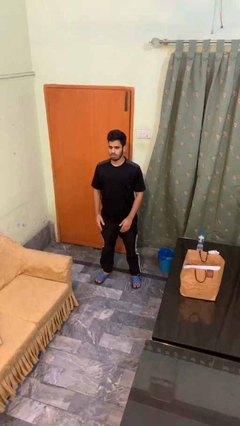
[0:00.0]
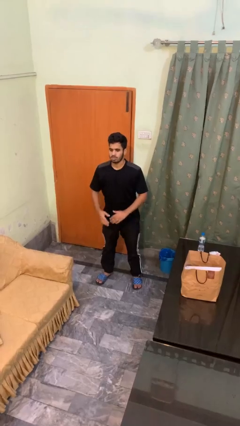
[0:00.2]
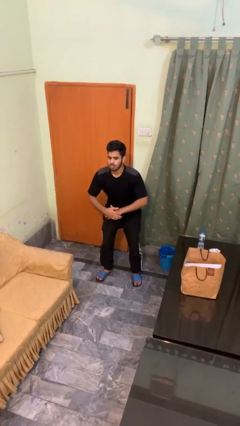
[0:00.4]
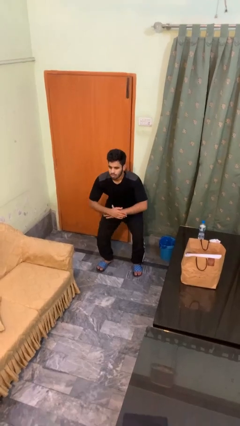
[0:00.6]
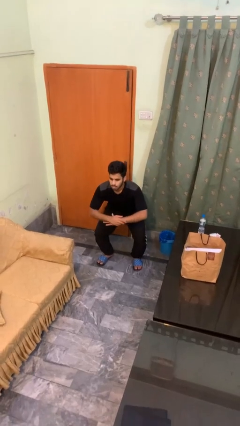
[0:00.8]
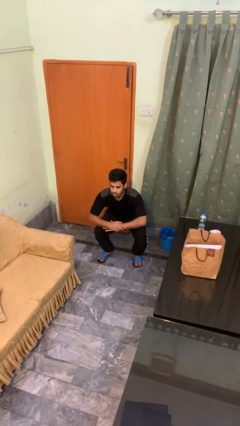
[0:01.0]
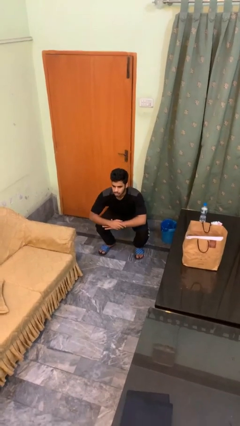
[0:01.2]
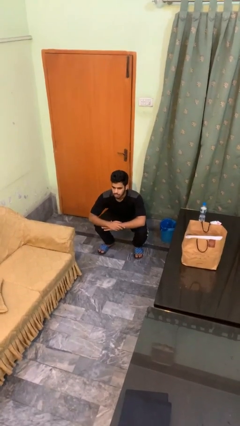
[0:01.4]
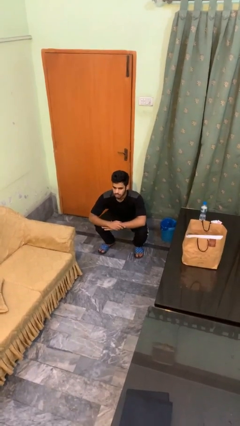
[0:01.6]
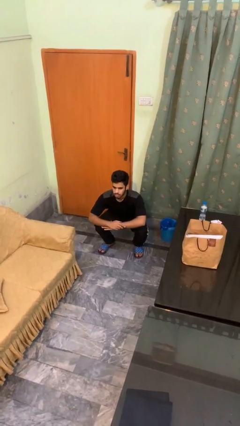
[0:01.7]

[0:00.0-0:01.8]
person squats

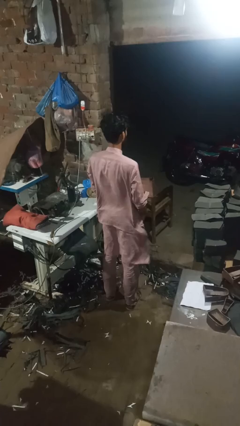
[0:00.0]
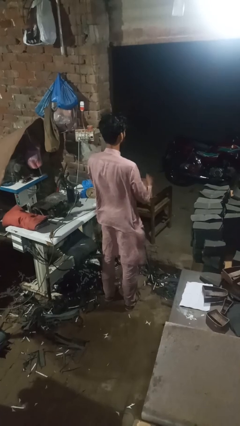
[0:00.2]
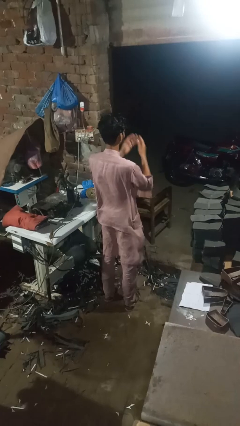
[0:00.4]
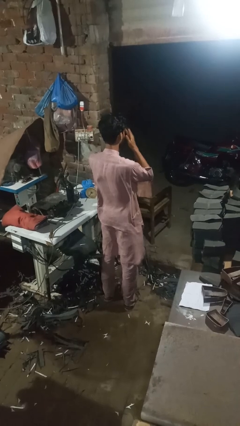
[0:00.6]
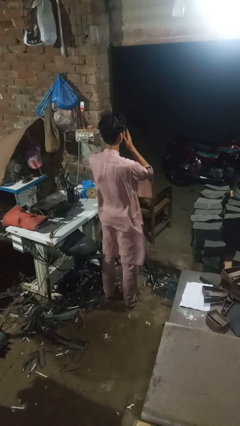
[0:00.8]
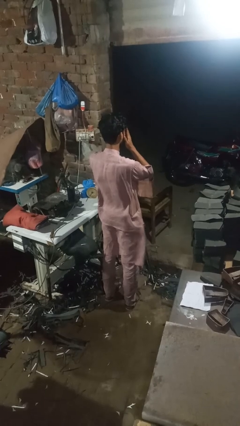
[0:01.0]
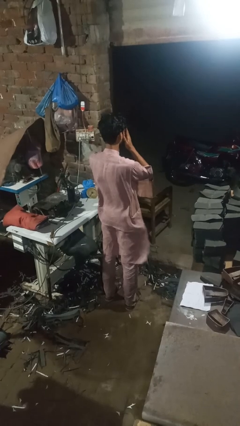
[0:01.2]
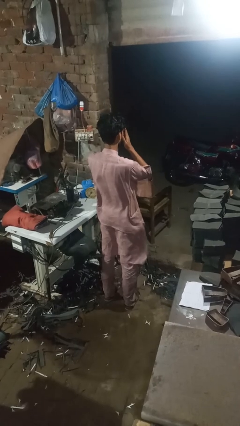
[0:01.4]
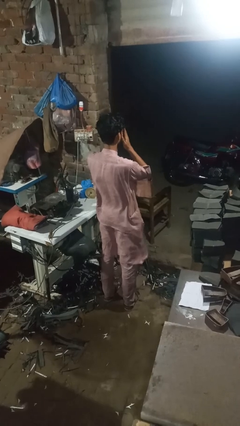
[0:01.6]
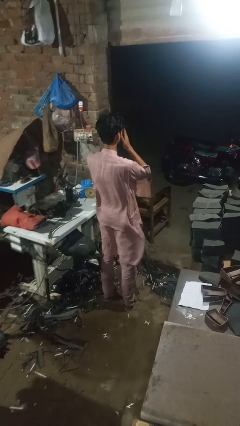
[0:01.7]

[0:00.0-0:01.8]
person sneezes into hand

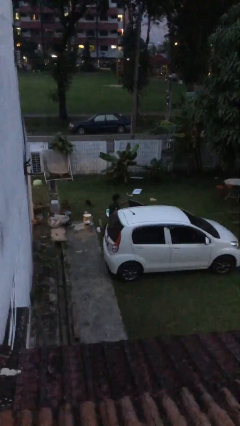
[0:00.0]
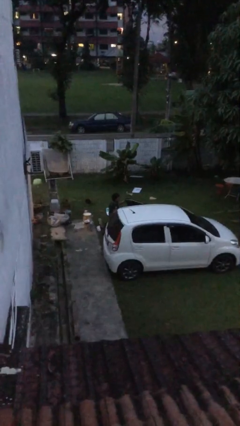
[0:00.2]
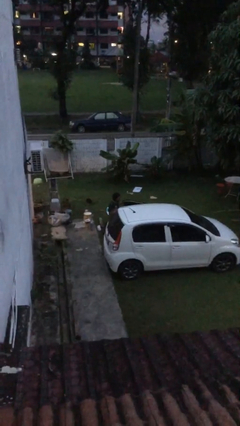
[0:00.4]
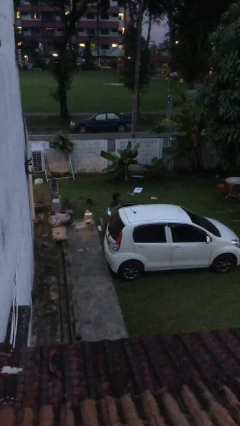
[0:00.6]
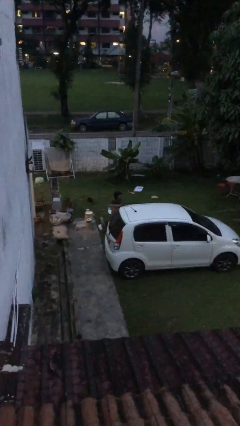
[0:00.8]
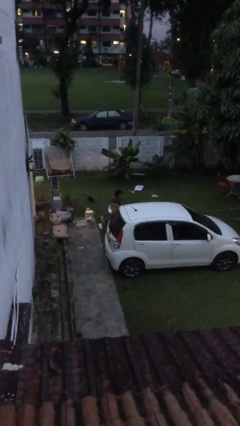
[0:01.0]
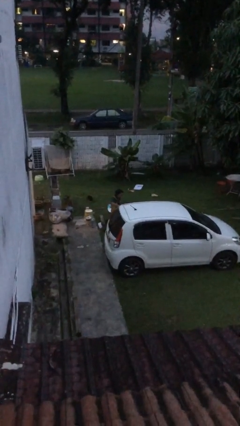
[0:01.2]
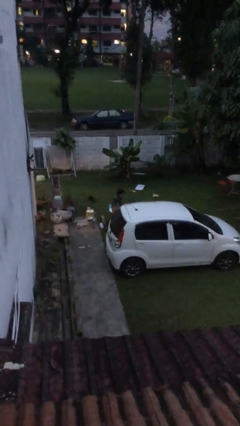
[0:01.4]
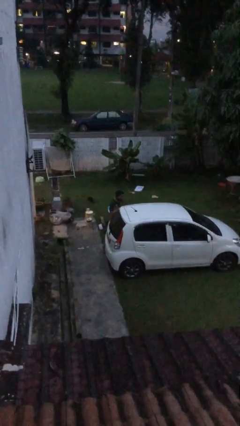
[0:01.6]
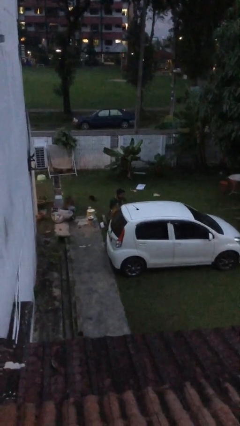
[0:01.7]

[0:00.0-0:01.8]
person closes car door

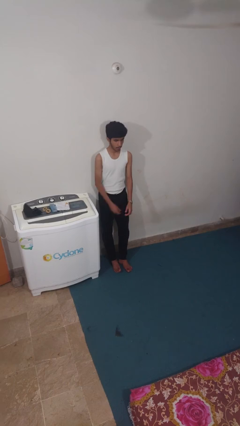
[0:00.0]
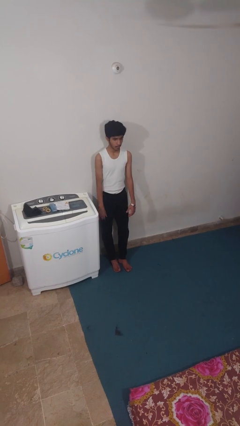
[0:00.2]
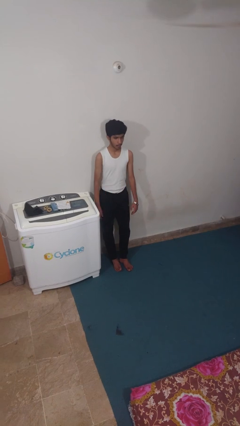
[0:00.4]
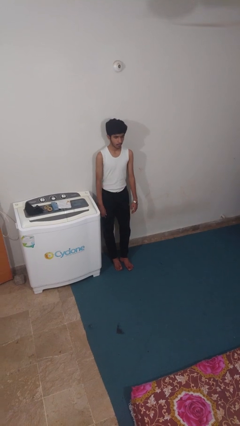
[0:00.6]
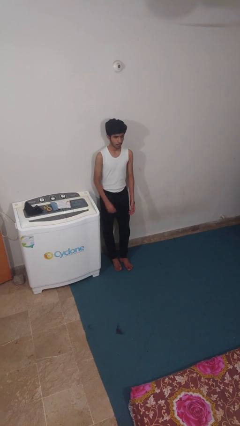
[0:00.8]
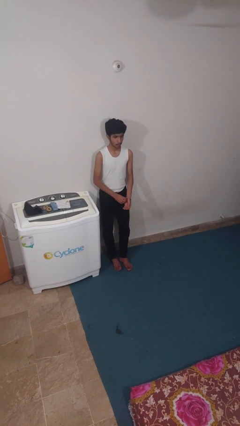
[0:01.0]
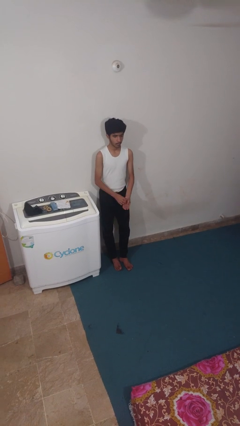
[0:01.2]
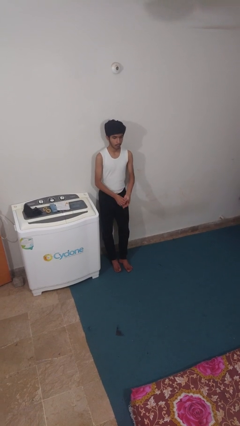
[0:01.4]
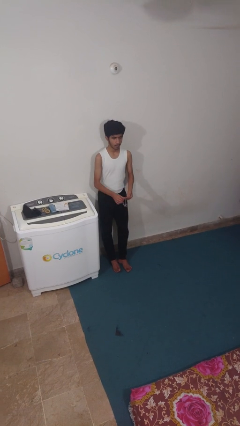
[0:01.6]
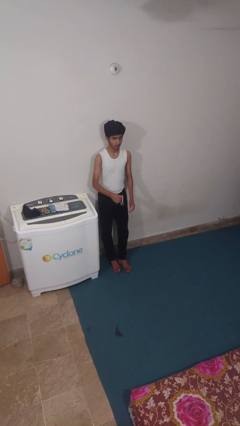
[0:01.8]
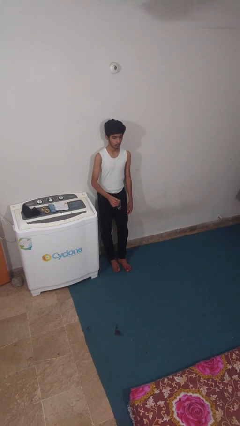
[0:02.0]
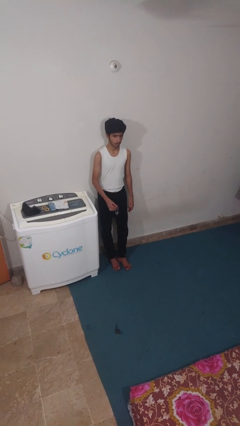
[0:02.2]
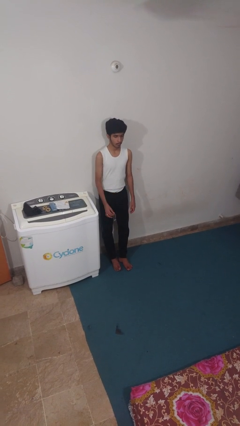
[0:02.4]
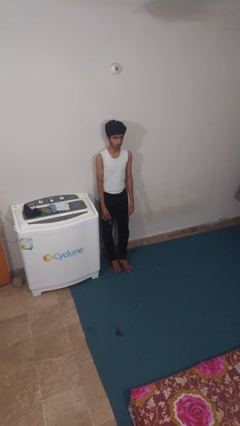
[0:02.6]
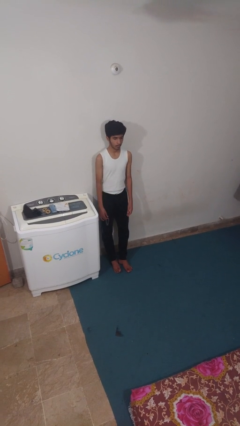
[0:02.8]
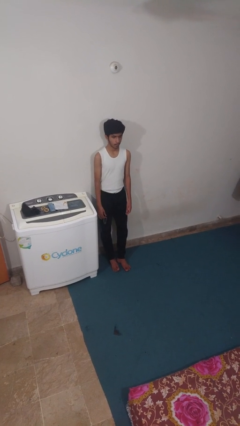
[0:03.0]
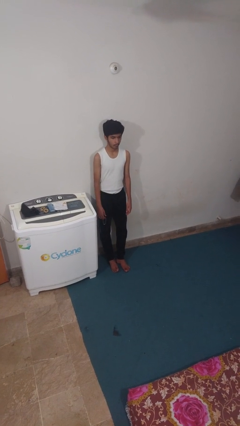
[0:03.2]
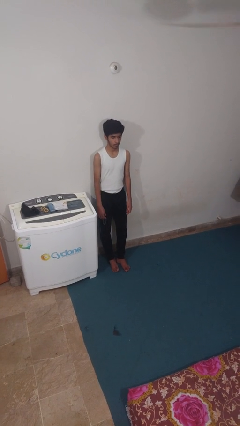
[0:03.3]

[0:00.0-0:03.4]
person takes off wristwatch

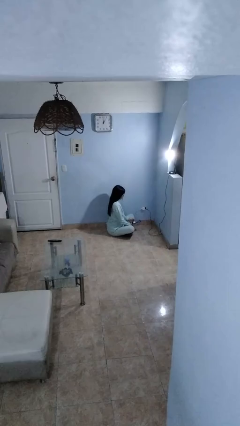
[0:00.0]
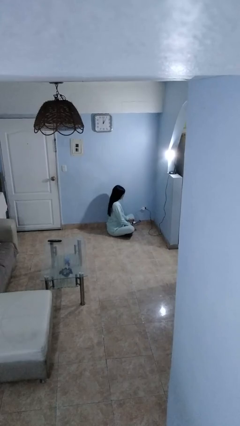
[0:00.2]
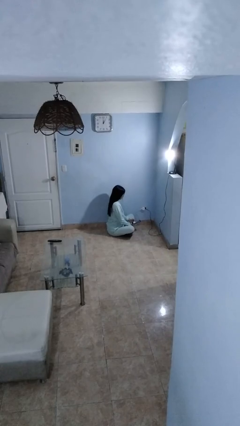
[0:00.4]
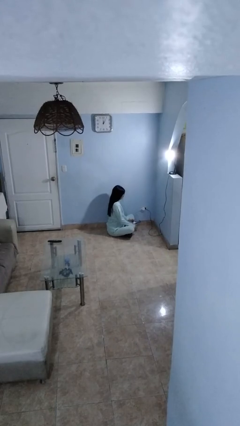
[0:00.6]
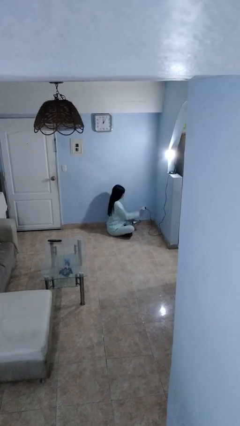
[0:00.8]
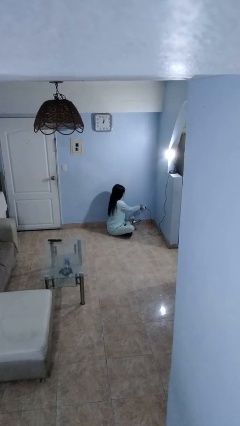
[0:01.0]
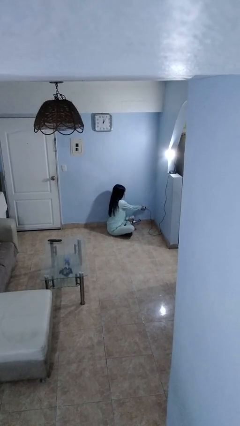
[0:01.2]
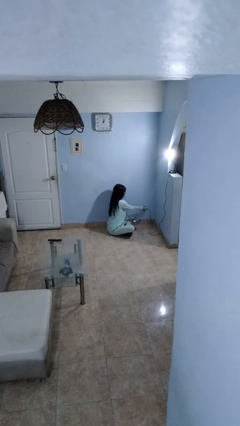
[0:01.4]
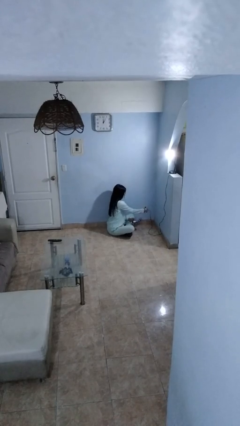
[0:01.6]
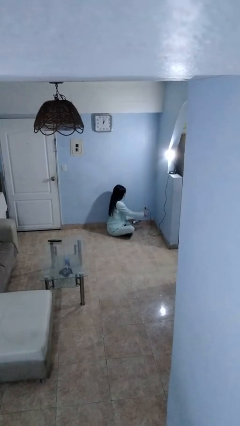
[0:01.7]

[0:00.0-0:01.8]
person unplugs from electrical socket

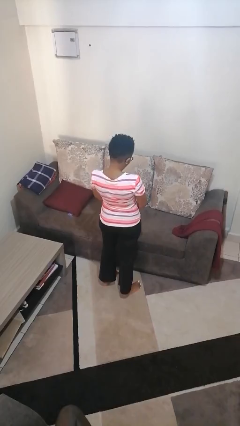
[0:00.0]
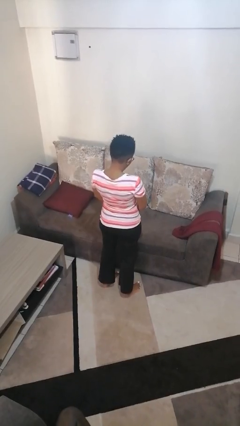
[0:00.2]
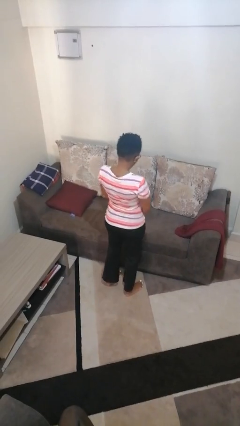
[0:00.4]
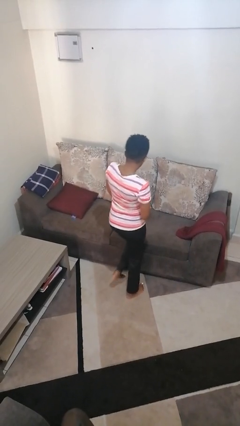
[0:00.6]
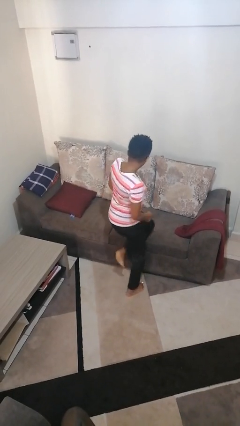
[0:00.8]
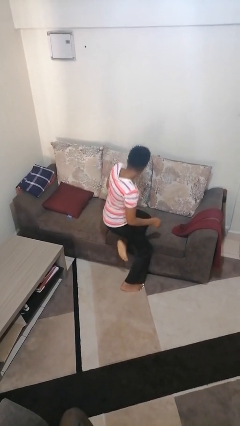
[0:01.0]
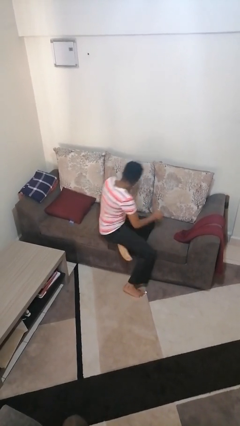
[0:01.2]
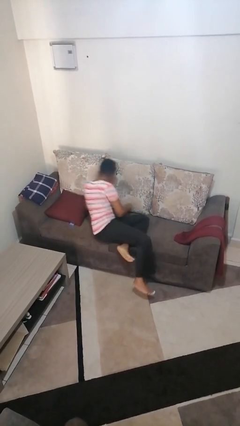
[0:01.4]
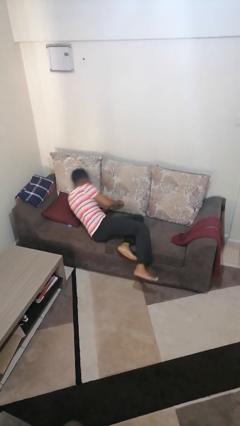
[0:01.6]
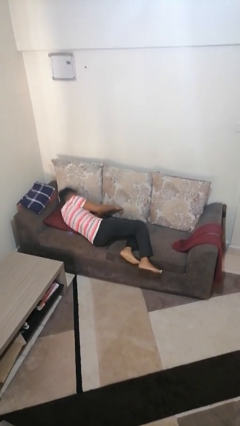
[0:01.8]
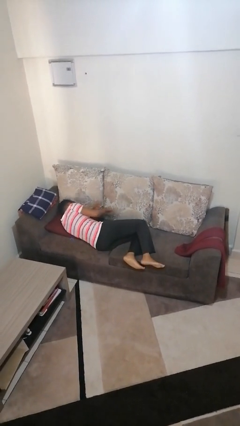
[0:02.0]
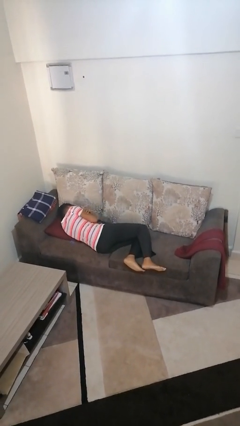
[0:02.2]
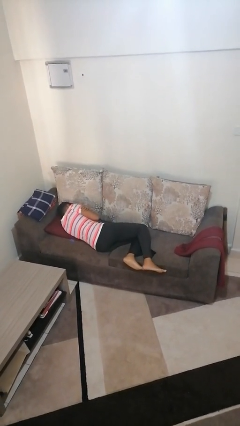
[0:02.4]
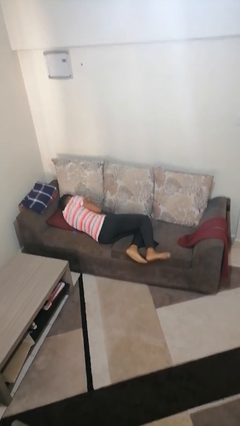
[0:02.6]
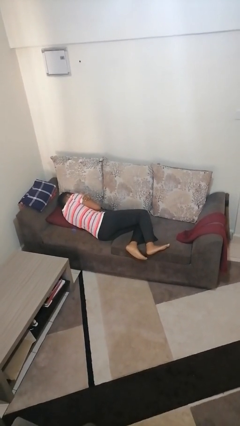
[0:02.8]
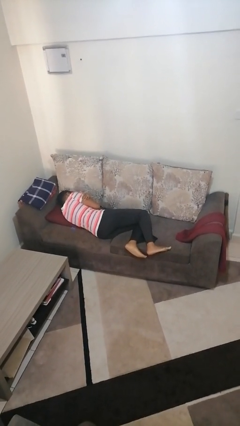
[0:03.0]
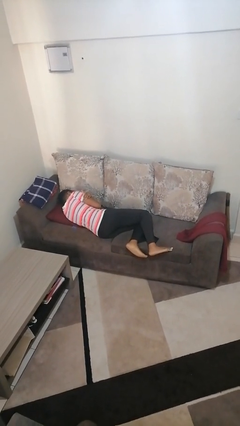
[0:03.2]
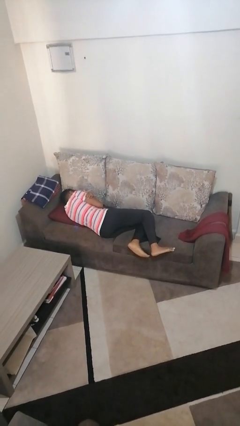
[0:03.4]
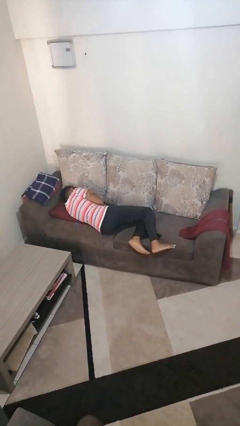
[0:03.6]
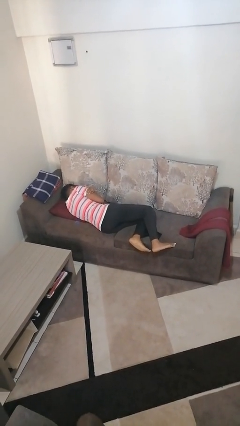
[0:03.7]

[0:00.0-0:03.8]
person lies down on bed

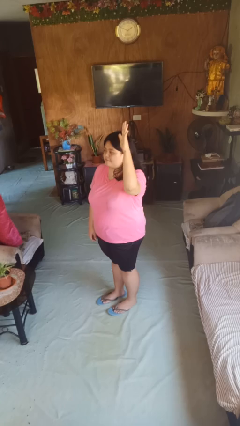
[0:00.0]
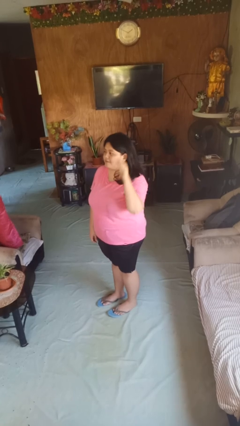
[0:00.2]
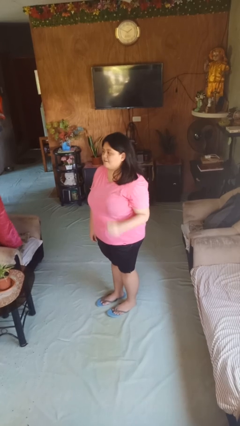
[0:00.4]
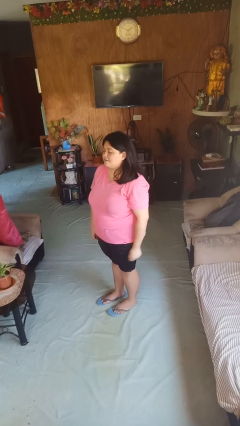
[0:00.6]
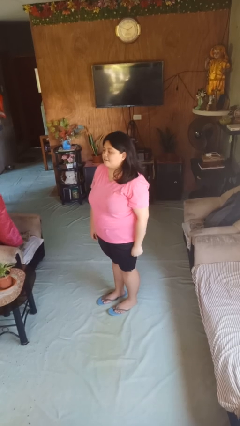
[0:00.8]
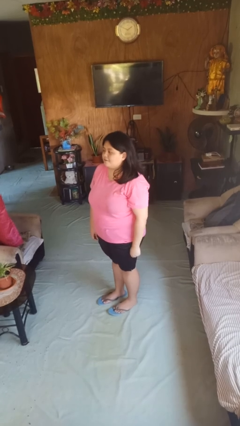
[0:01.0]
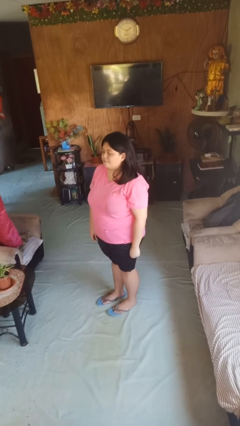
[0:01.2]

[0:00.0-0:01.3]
person gestures lower hand

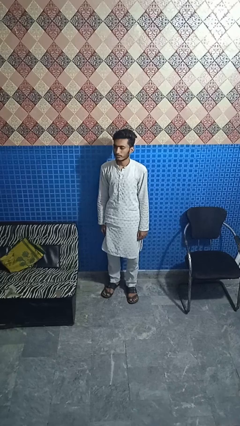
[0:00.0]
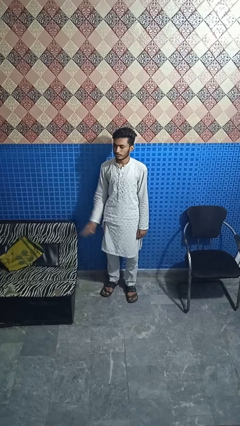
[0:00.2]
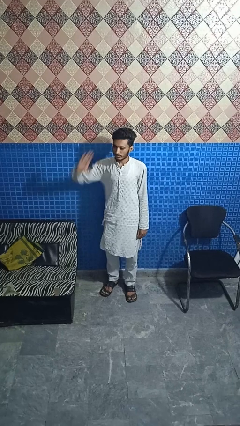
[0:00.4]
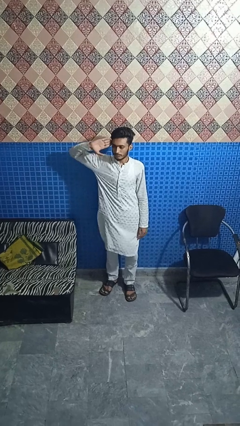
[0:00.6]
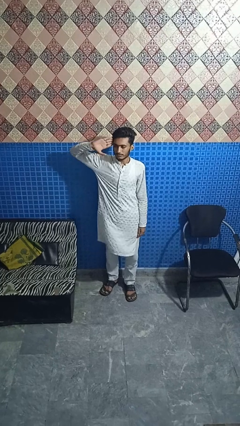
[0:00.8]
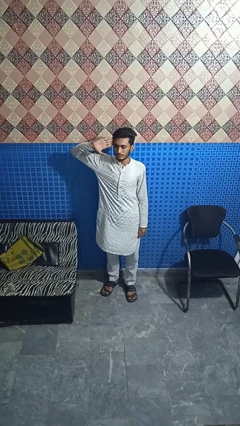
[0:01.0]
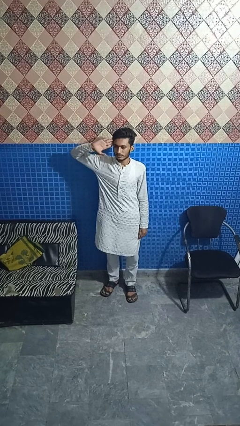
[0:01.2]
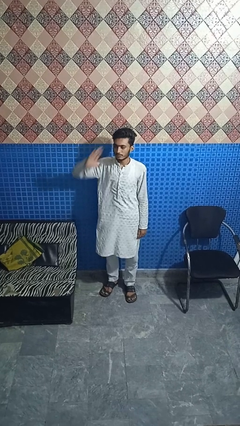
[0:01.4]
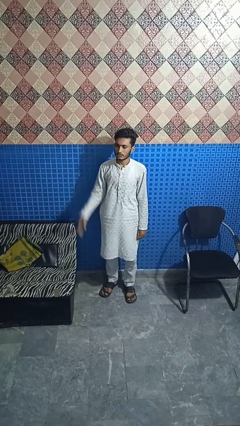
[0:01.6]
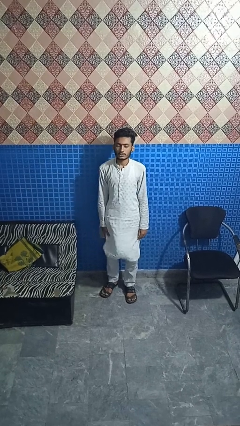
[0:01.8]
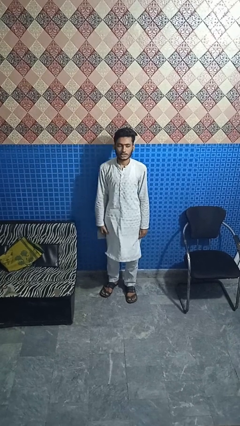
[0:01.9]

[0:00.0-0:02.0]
person salutes
